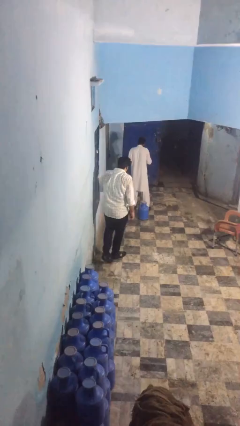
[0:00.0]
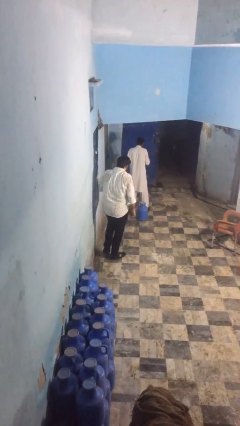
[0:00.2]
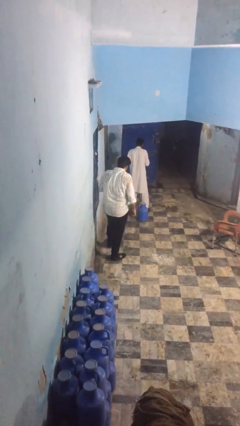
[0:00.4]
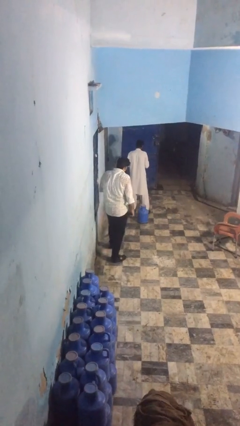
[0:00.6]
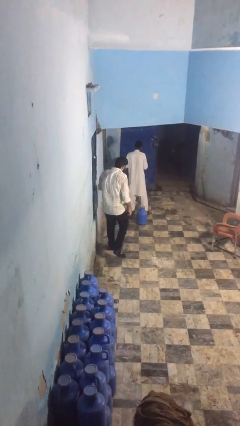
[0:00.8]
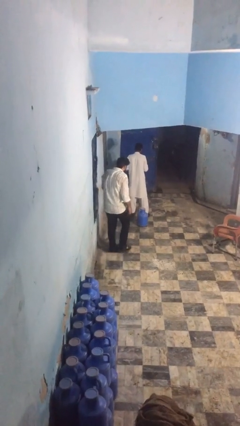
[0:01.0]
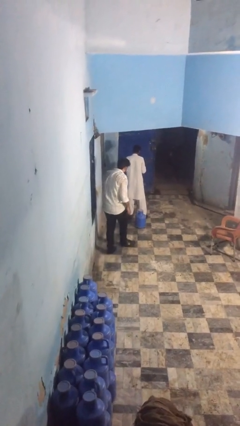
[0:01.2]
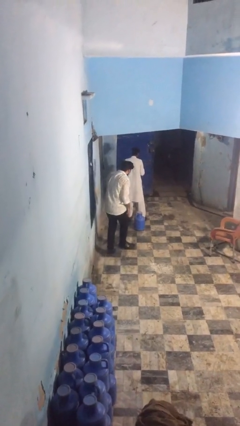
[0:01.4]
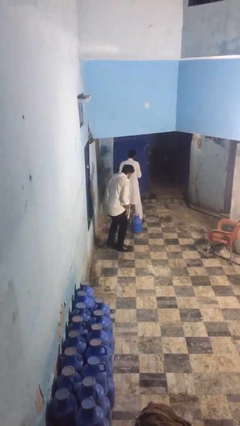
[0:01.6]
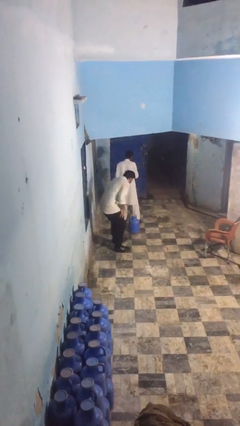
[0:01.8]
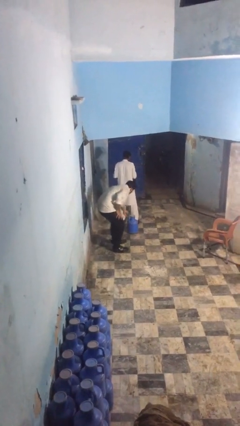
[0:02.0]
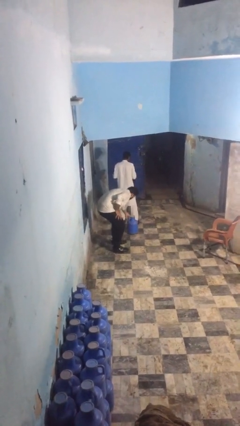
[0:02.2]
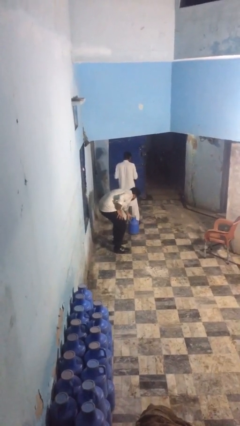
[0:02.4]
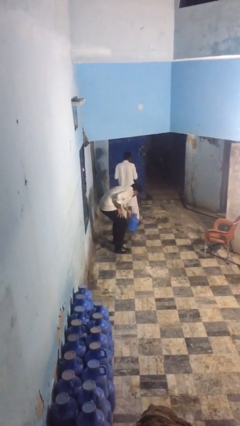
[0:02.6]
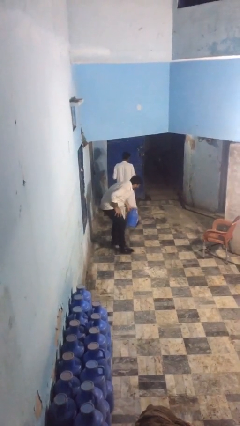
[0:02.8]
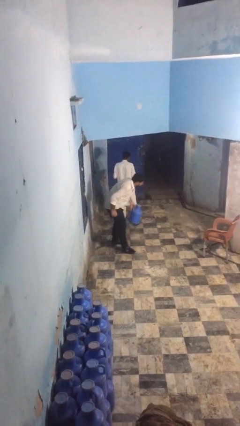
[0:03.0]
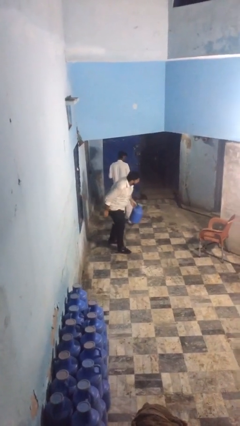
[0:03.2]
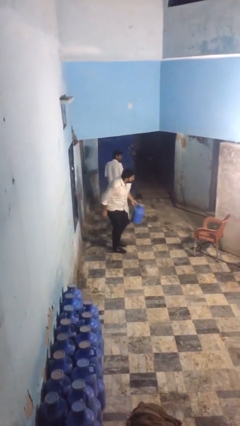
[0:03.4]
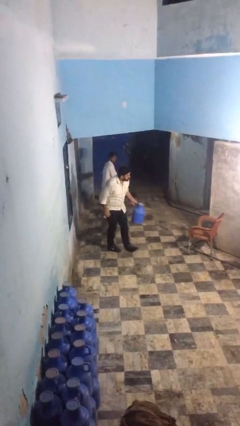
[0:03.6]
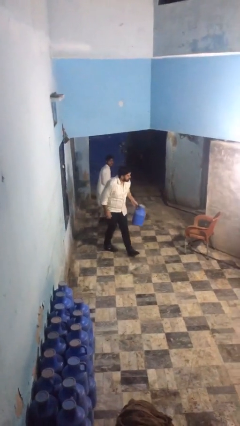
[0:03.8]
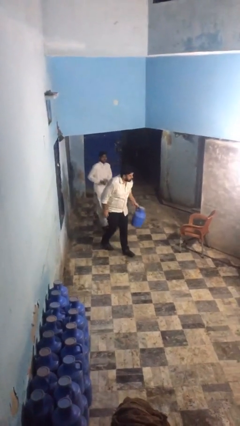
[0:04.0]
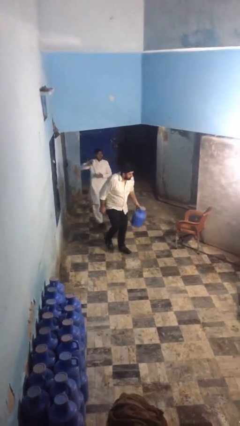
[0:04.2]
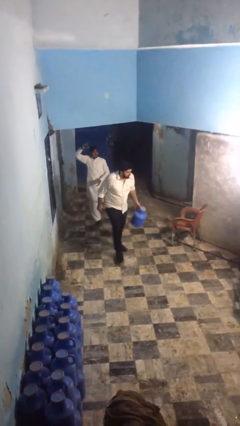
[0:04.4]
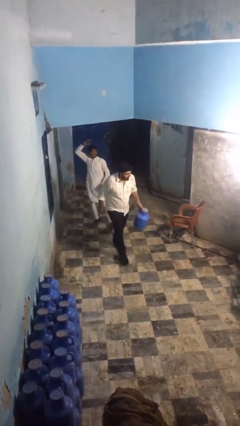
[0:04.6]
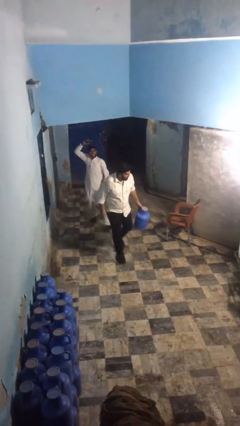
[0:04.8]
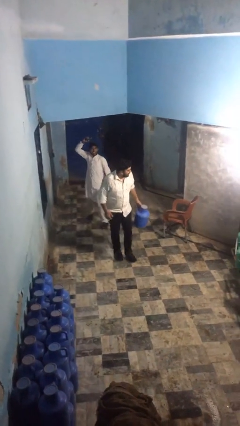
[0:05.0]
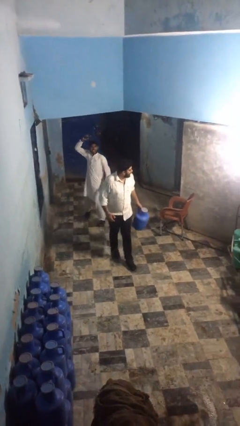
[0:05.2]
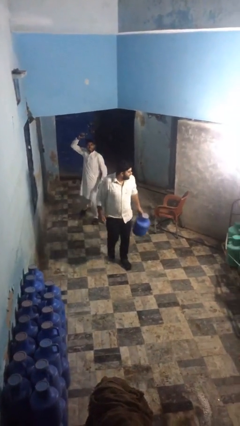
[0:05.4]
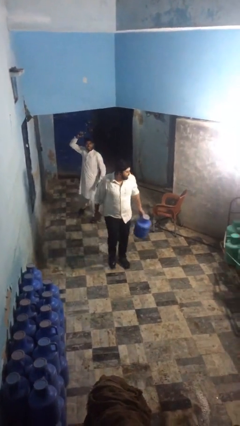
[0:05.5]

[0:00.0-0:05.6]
person steals object from person

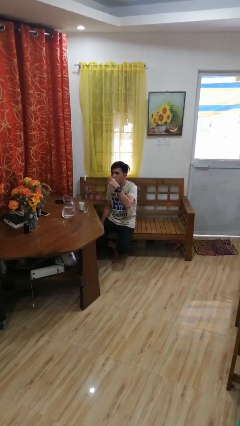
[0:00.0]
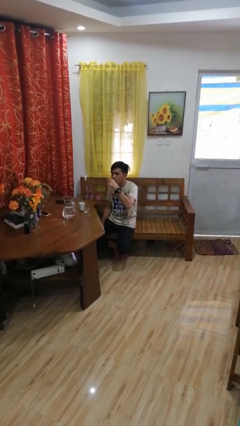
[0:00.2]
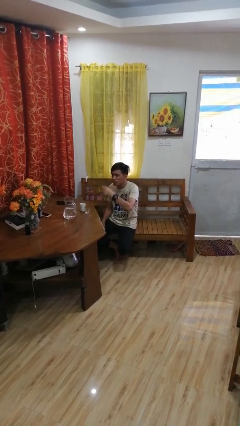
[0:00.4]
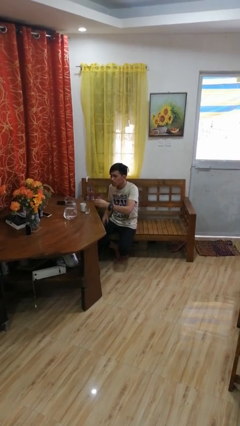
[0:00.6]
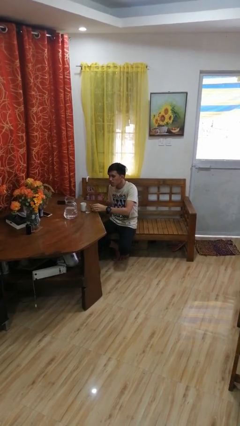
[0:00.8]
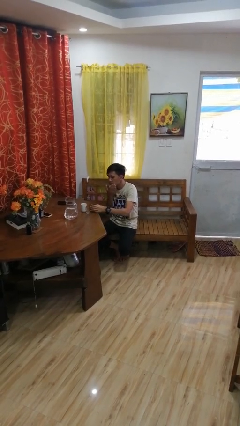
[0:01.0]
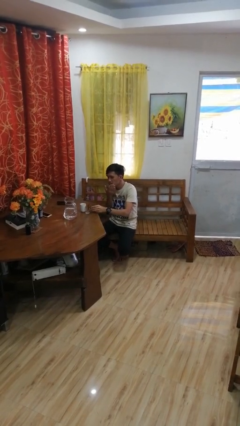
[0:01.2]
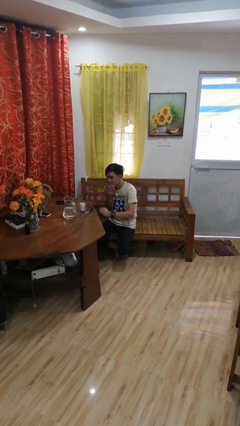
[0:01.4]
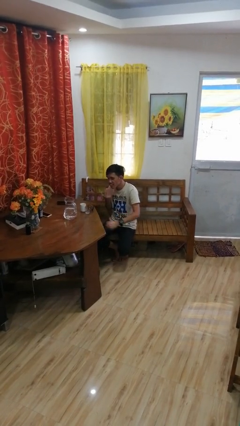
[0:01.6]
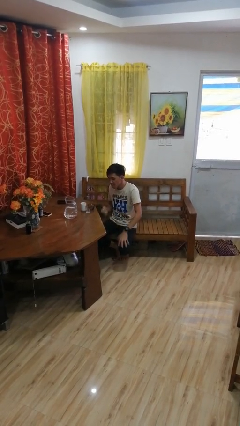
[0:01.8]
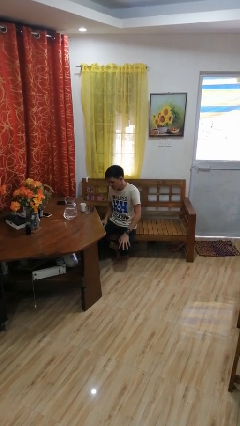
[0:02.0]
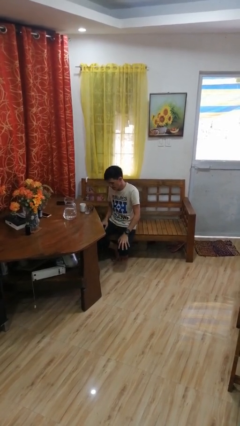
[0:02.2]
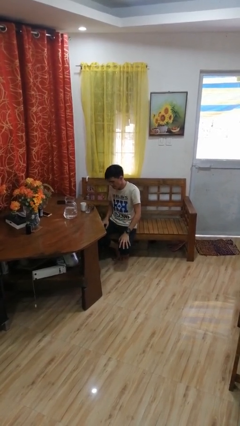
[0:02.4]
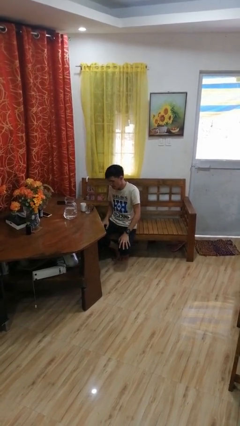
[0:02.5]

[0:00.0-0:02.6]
person puts down object on table

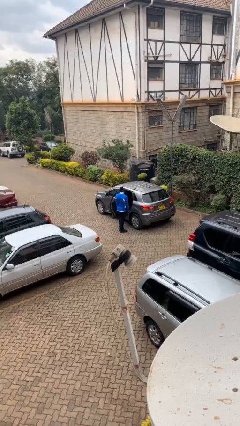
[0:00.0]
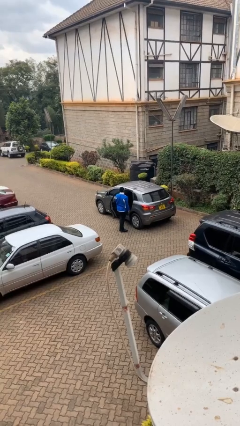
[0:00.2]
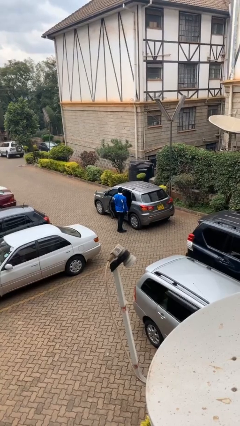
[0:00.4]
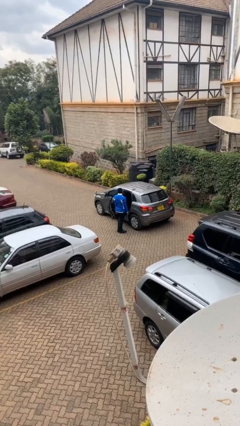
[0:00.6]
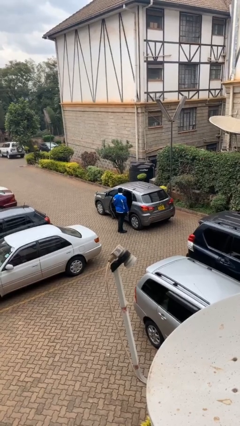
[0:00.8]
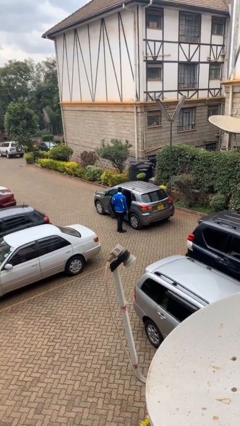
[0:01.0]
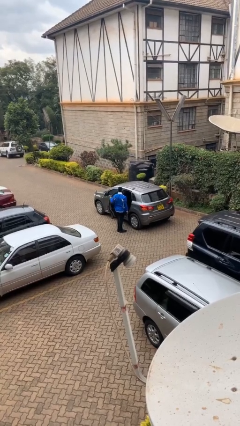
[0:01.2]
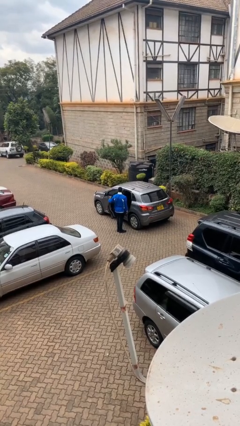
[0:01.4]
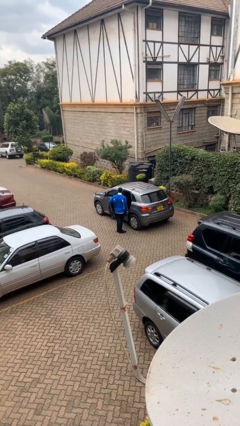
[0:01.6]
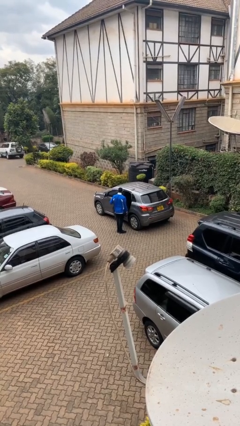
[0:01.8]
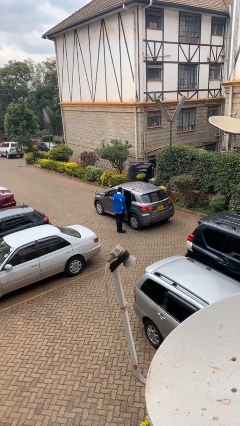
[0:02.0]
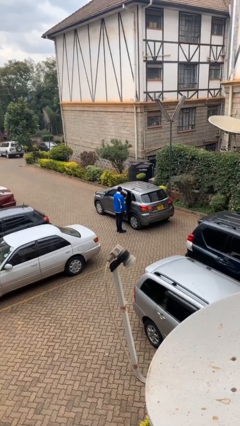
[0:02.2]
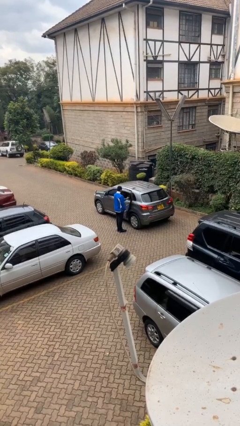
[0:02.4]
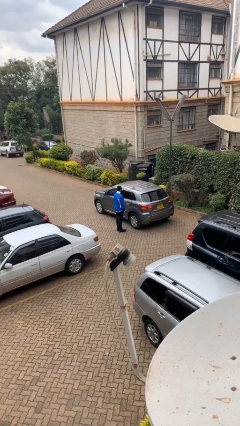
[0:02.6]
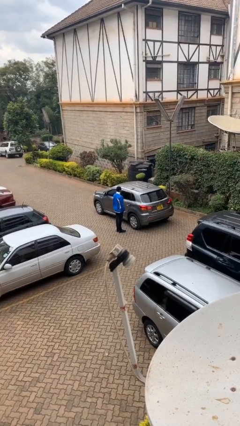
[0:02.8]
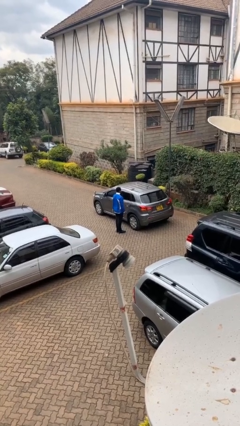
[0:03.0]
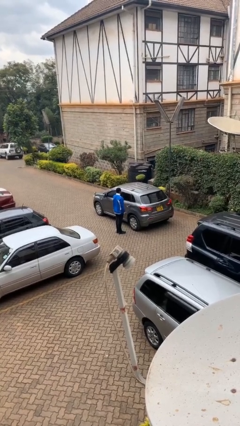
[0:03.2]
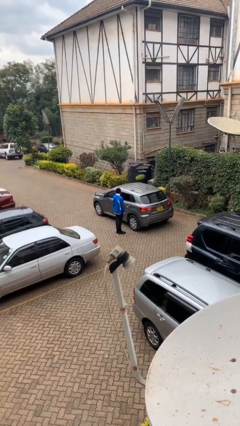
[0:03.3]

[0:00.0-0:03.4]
person closes car door

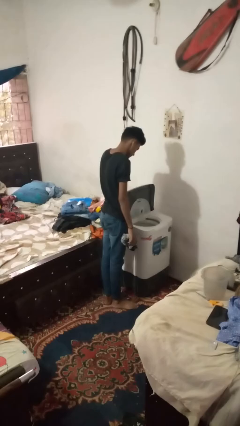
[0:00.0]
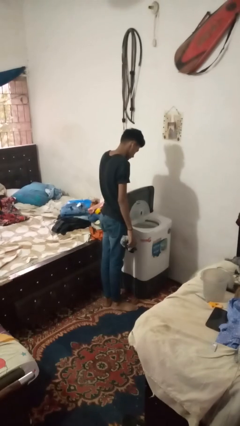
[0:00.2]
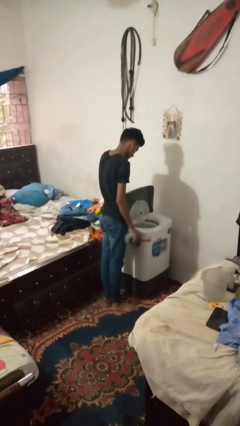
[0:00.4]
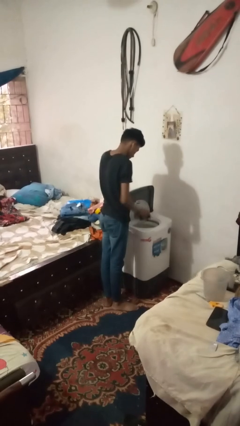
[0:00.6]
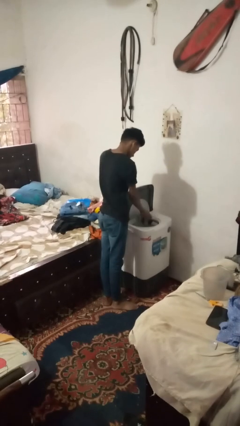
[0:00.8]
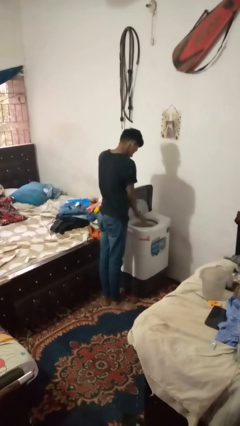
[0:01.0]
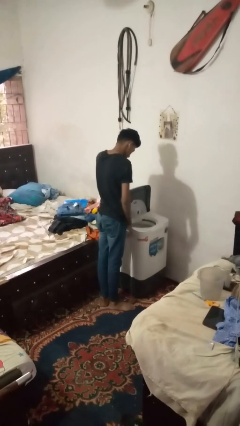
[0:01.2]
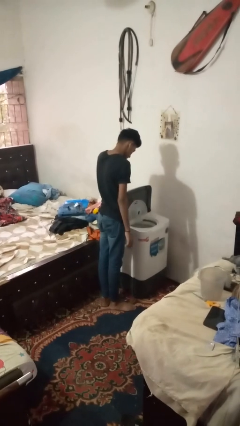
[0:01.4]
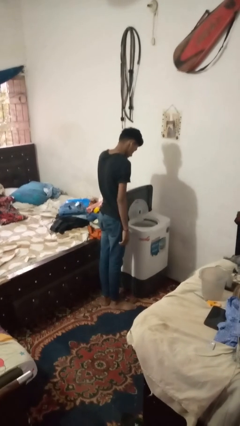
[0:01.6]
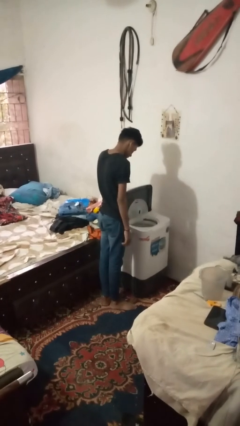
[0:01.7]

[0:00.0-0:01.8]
person loads dryer

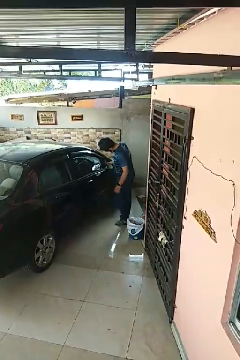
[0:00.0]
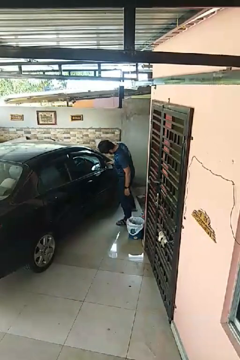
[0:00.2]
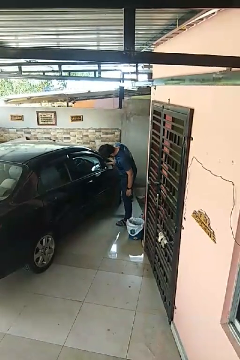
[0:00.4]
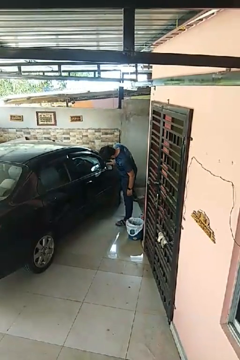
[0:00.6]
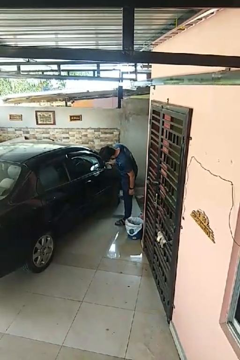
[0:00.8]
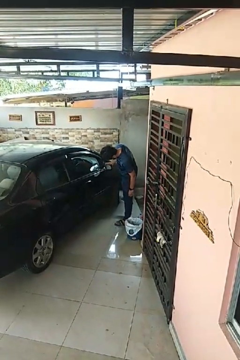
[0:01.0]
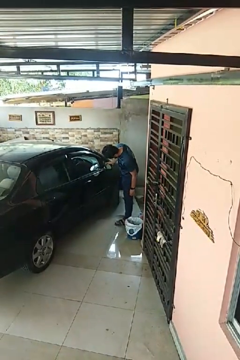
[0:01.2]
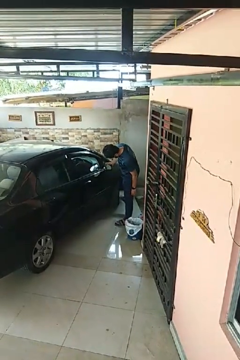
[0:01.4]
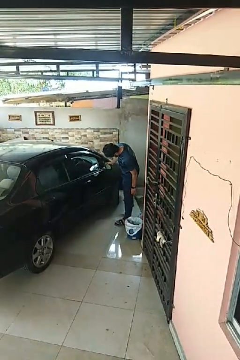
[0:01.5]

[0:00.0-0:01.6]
person kicks car tires

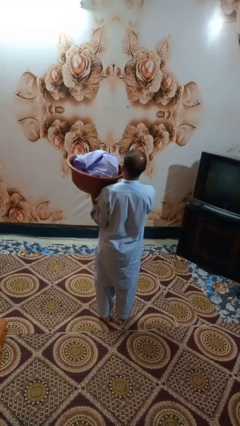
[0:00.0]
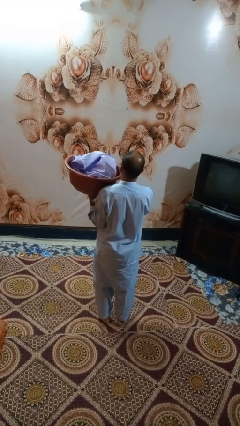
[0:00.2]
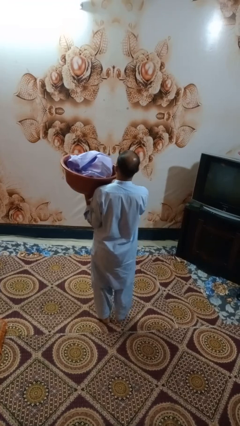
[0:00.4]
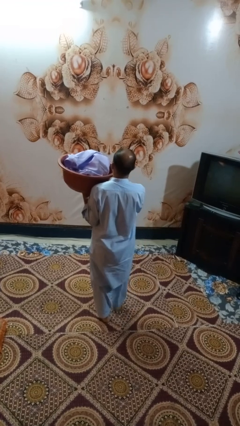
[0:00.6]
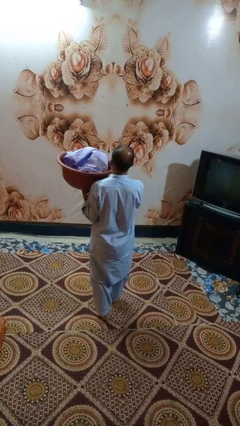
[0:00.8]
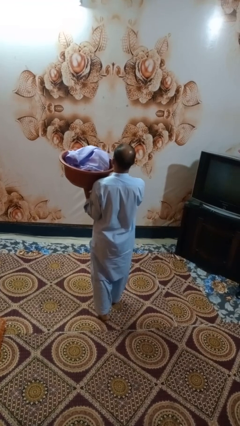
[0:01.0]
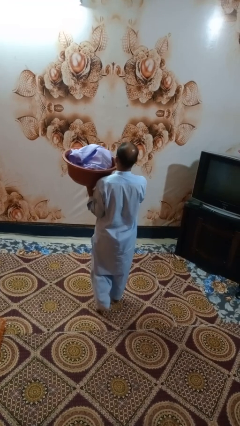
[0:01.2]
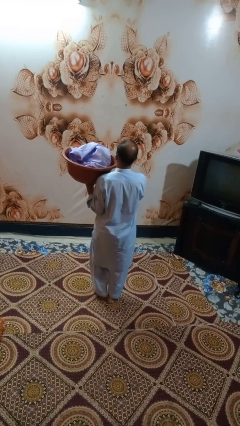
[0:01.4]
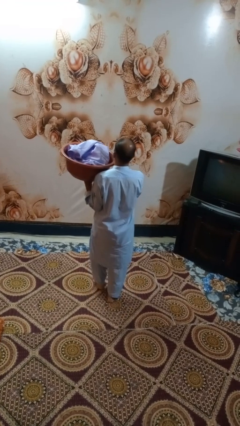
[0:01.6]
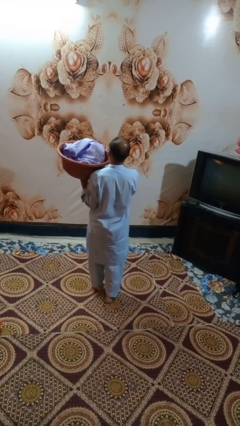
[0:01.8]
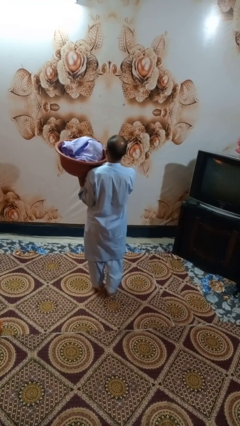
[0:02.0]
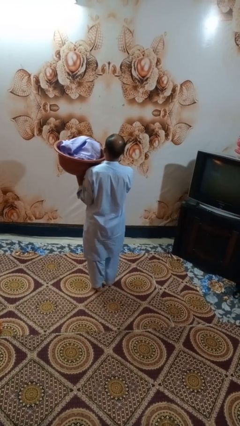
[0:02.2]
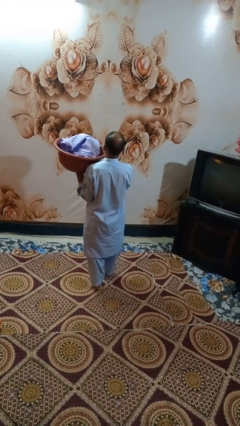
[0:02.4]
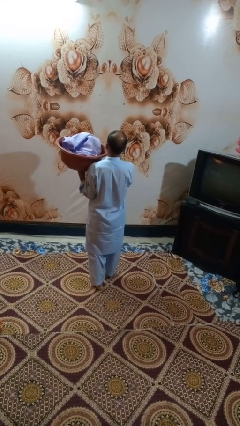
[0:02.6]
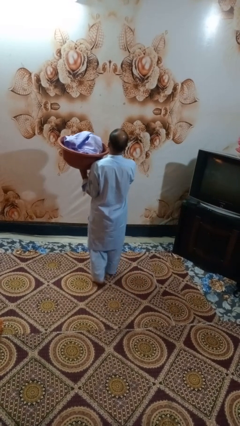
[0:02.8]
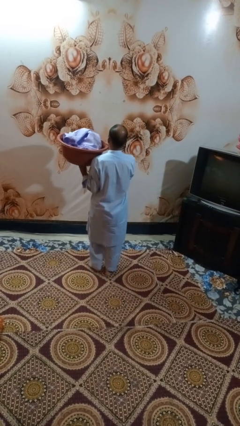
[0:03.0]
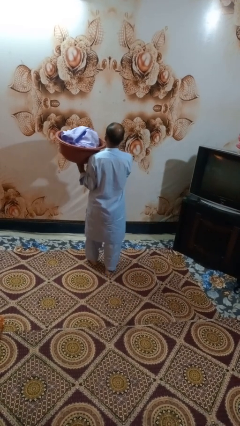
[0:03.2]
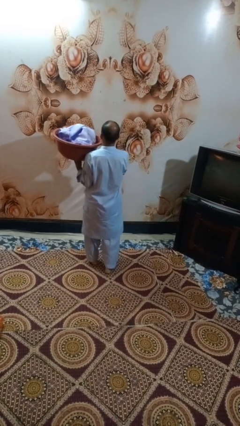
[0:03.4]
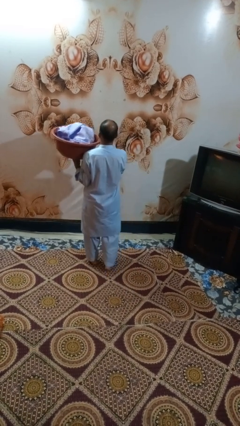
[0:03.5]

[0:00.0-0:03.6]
person carries laundry basket
